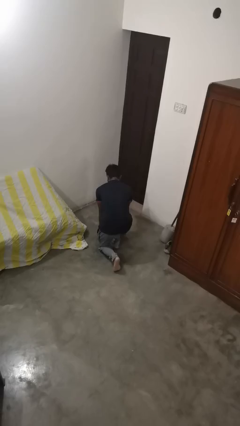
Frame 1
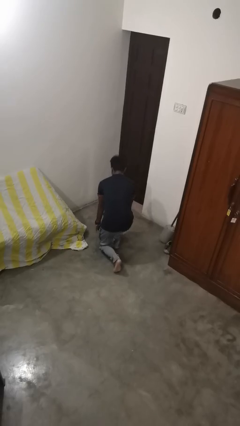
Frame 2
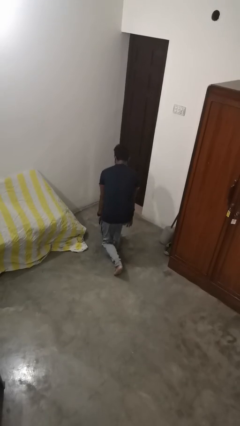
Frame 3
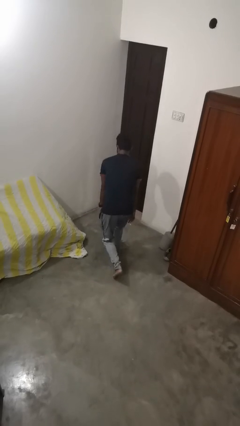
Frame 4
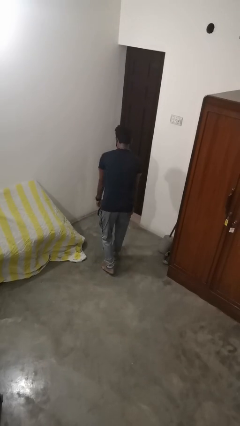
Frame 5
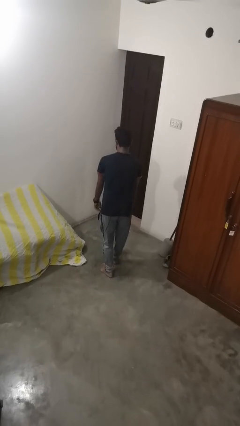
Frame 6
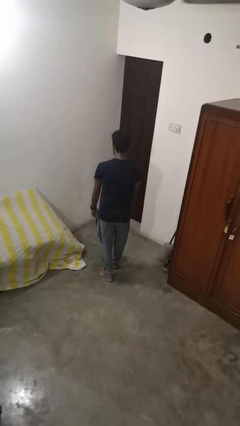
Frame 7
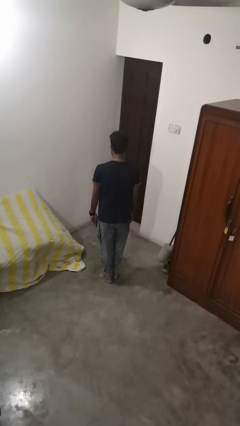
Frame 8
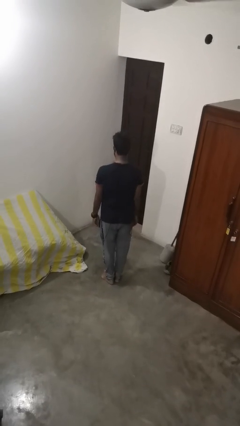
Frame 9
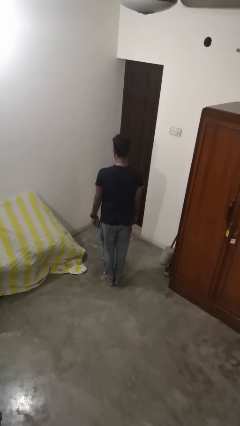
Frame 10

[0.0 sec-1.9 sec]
person stands up from floor

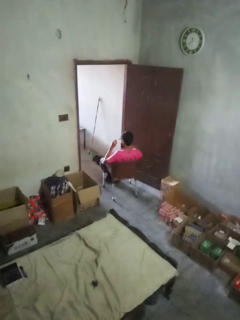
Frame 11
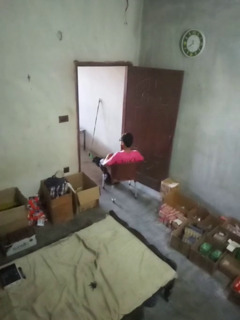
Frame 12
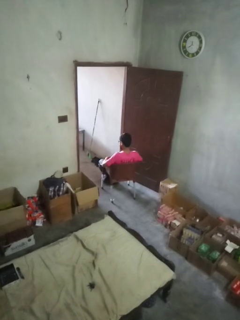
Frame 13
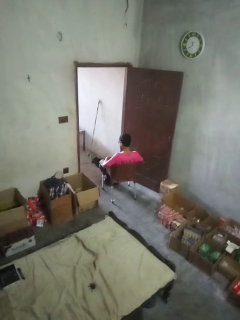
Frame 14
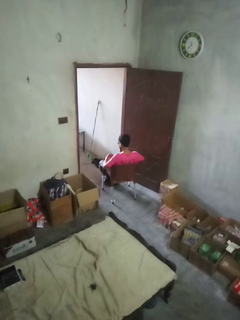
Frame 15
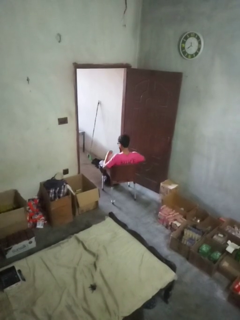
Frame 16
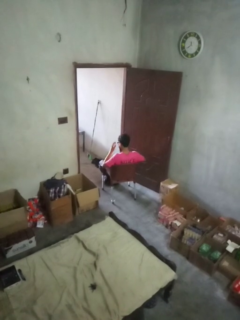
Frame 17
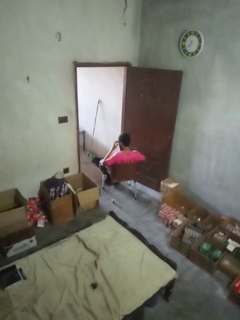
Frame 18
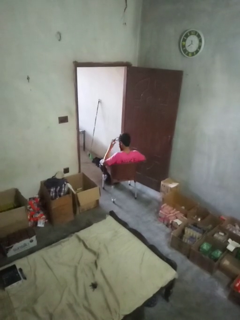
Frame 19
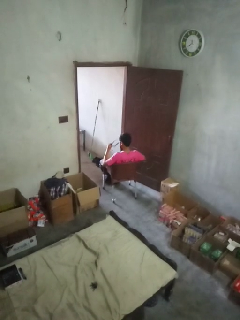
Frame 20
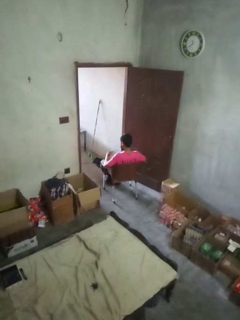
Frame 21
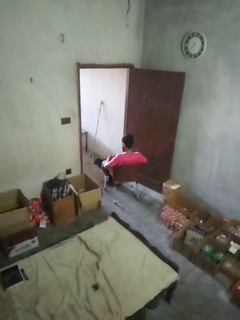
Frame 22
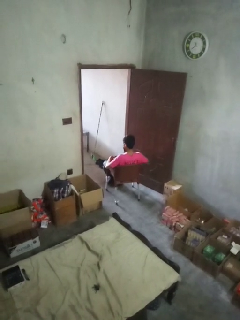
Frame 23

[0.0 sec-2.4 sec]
person takes off glasses

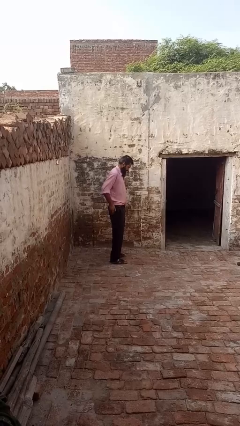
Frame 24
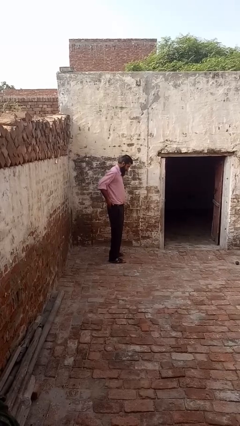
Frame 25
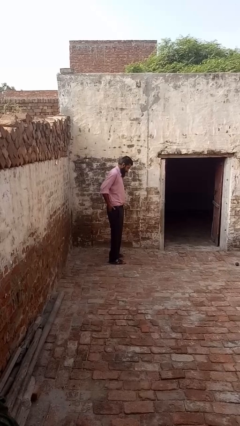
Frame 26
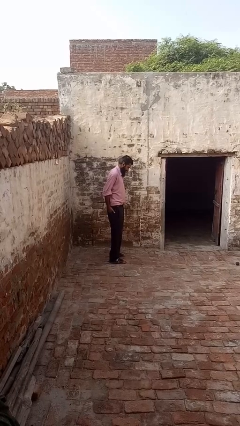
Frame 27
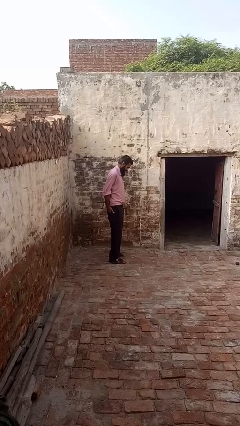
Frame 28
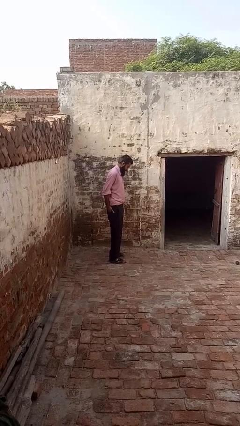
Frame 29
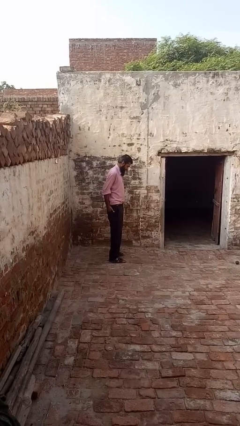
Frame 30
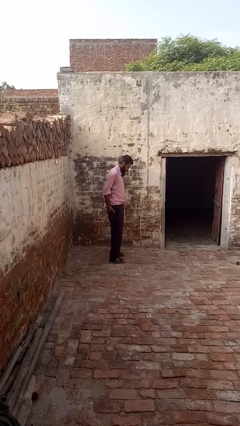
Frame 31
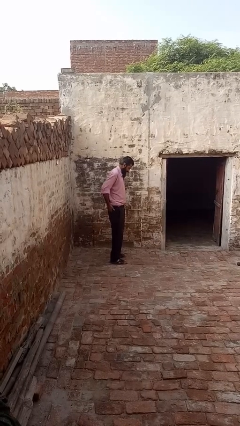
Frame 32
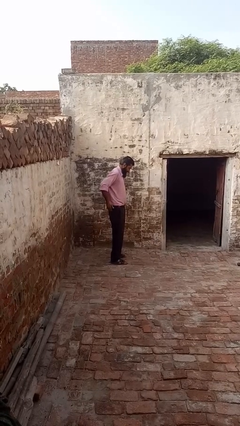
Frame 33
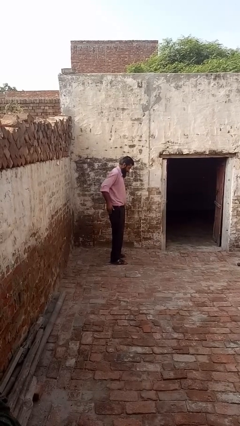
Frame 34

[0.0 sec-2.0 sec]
person puts hands in back pockets

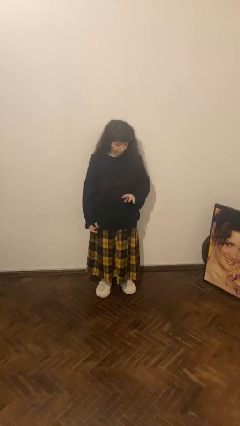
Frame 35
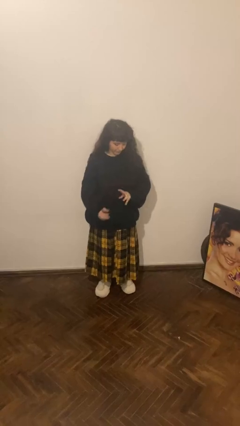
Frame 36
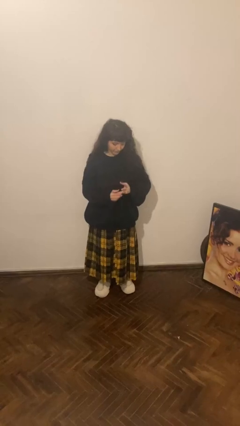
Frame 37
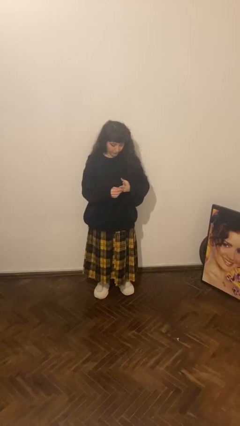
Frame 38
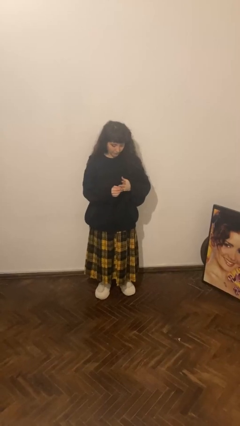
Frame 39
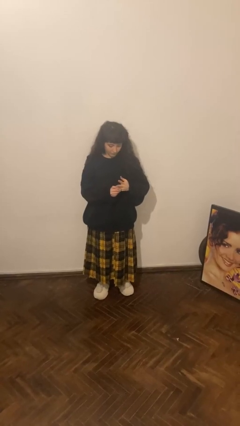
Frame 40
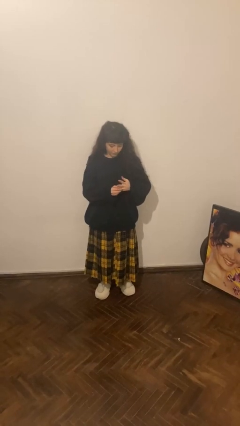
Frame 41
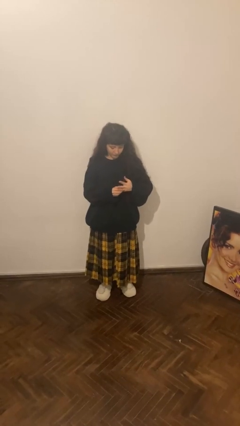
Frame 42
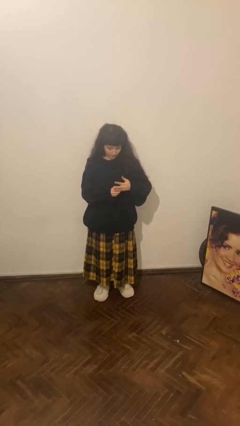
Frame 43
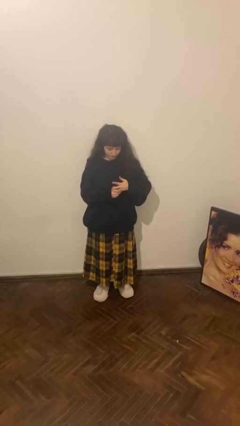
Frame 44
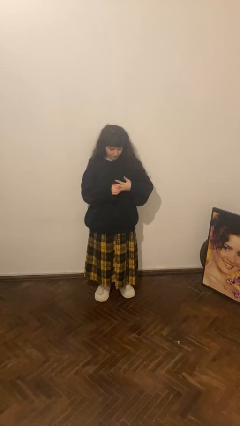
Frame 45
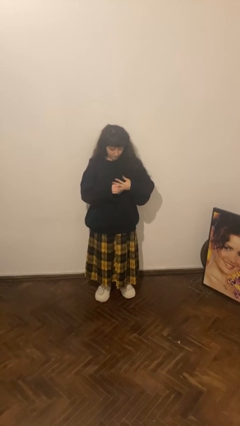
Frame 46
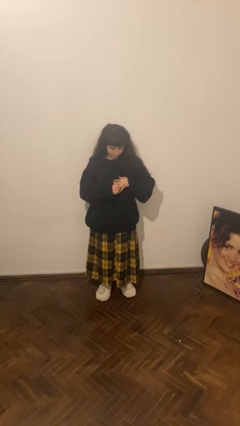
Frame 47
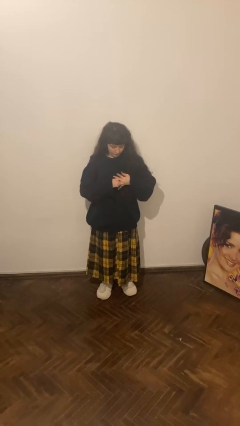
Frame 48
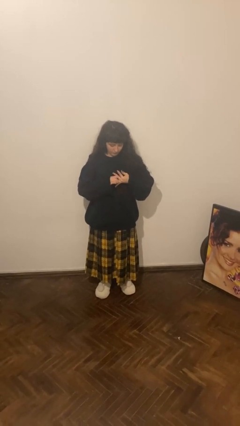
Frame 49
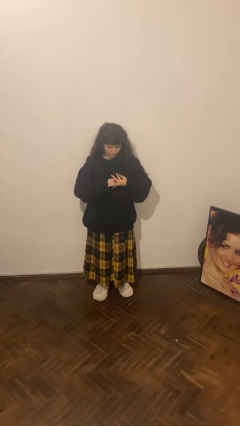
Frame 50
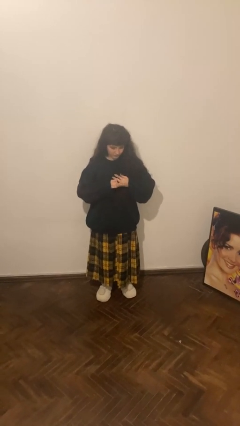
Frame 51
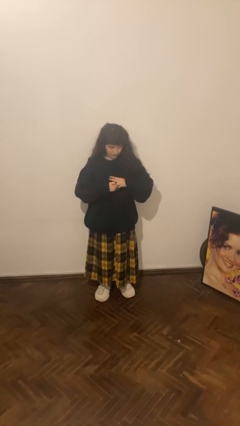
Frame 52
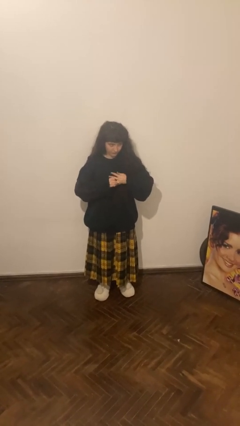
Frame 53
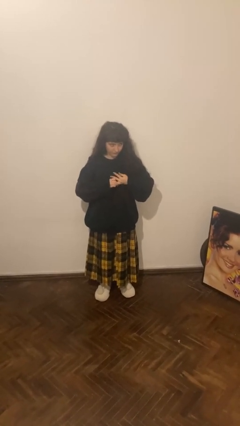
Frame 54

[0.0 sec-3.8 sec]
person takes off ring

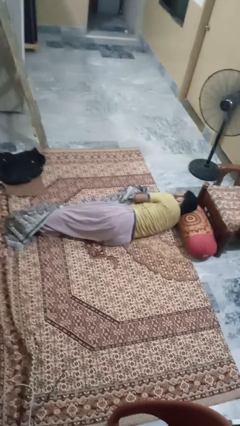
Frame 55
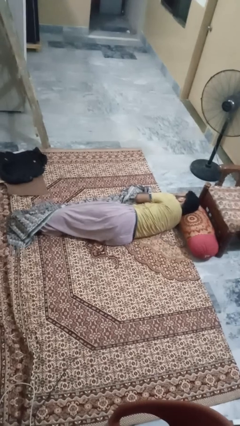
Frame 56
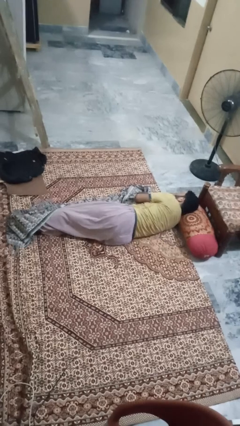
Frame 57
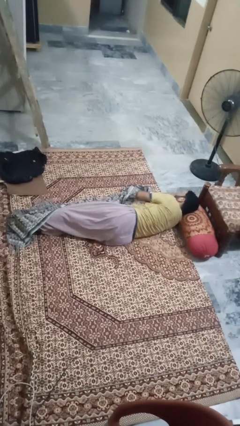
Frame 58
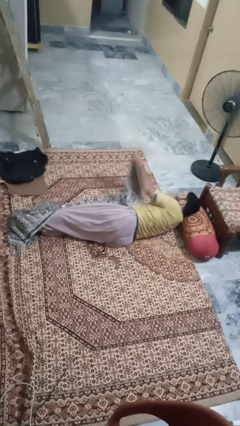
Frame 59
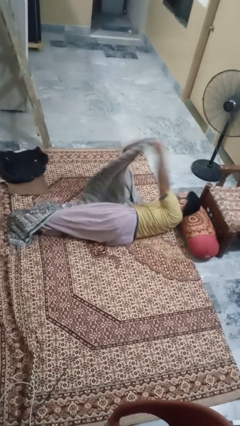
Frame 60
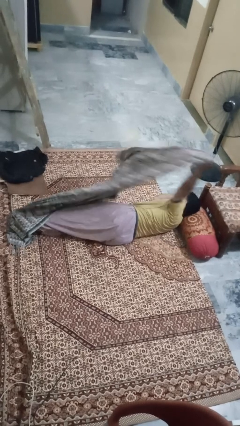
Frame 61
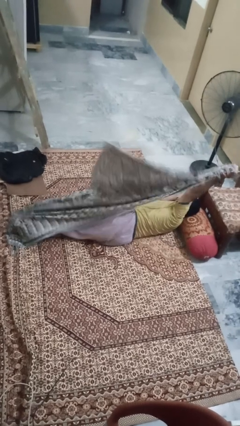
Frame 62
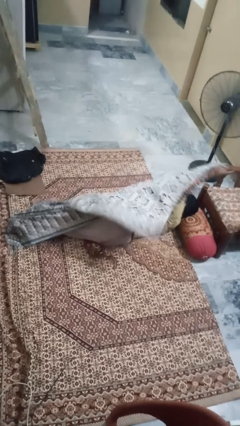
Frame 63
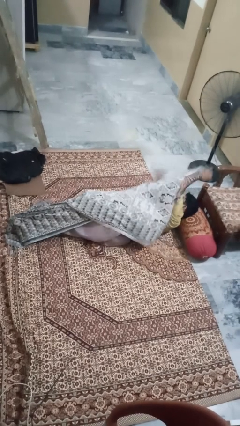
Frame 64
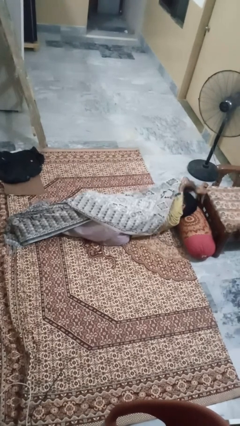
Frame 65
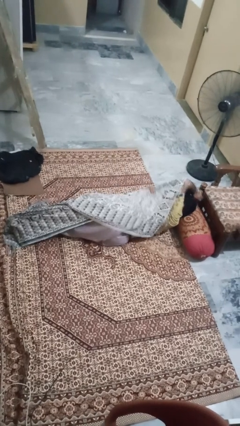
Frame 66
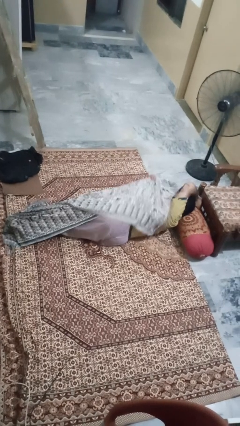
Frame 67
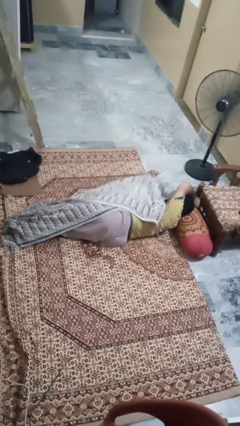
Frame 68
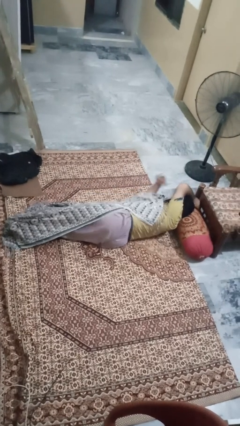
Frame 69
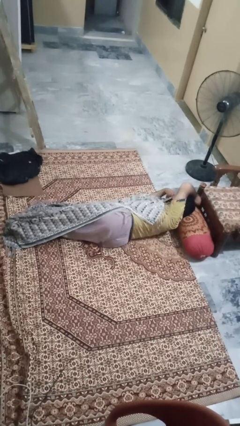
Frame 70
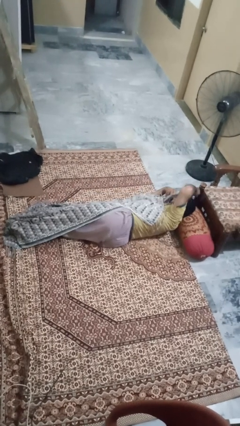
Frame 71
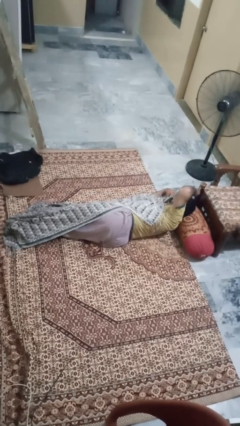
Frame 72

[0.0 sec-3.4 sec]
person covers with blanket

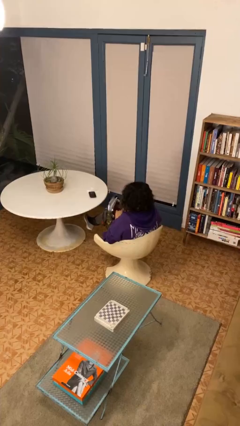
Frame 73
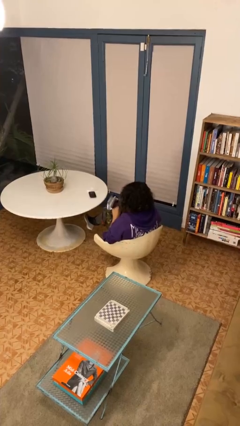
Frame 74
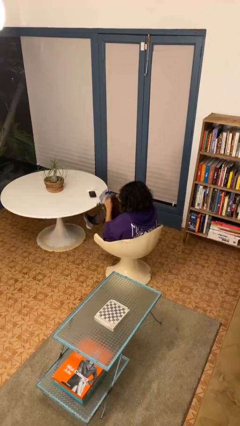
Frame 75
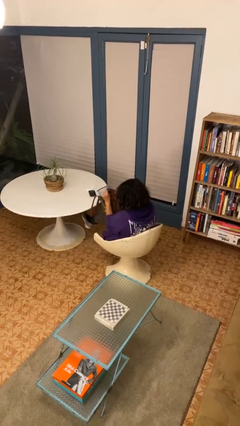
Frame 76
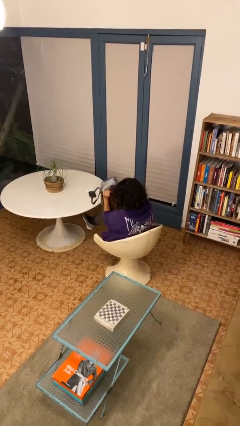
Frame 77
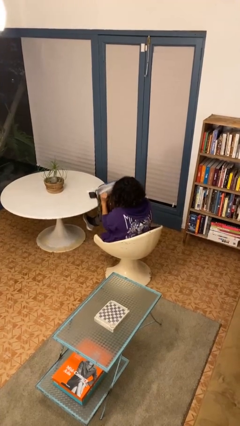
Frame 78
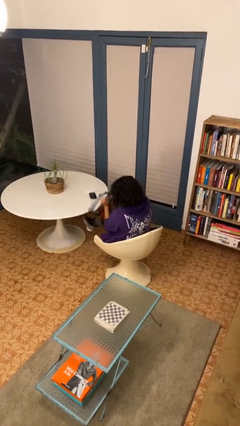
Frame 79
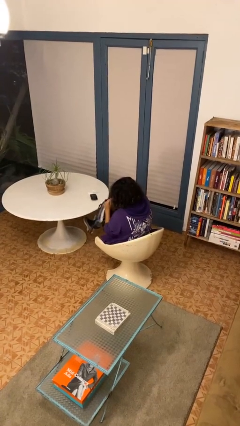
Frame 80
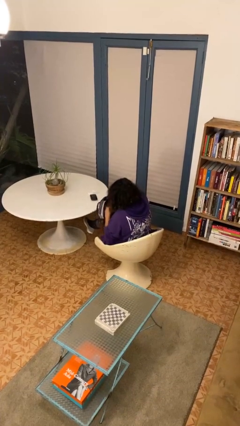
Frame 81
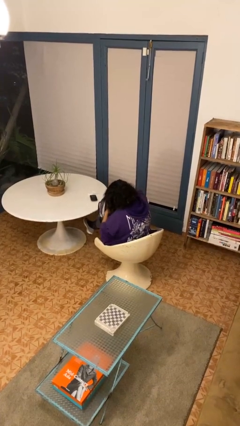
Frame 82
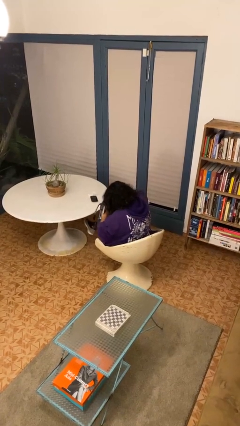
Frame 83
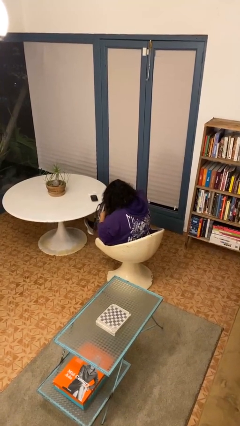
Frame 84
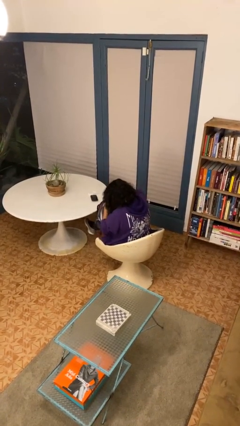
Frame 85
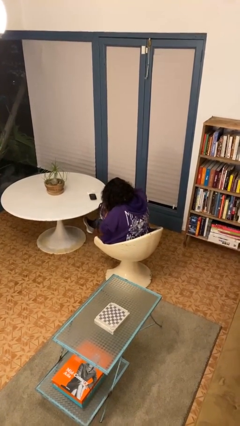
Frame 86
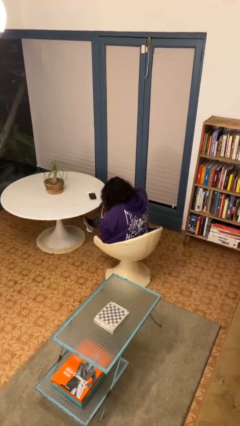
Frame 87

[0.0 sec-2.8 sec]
person searches in bag

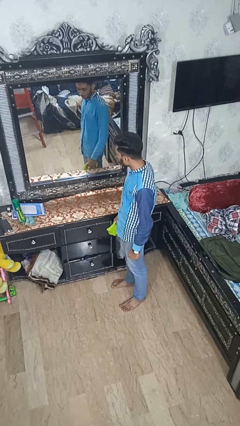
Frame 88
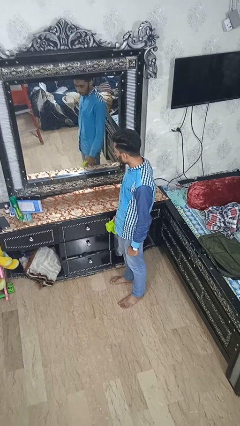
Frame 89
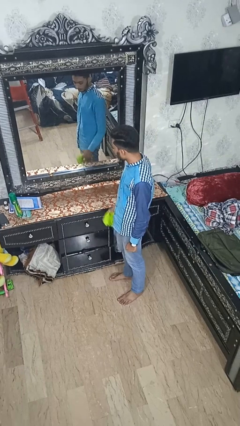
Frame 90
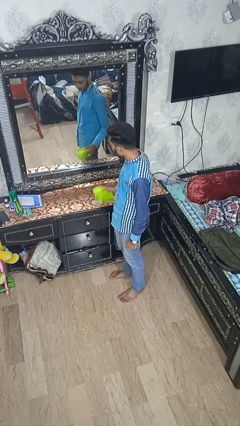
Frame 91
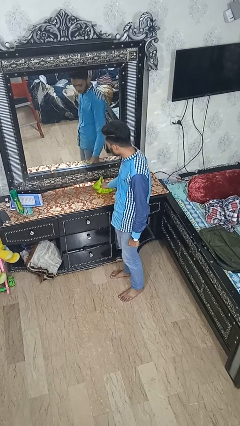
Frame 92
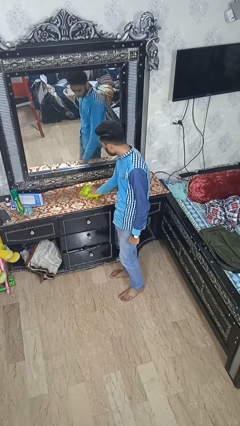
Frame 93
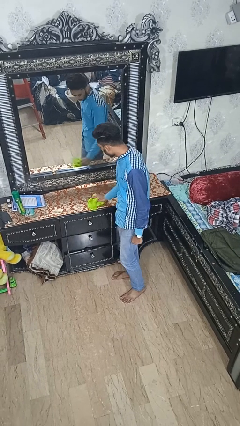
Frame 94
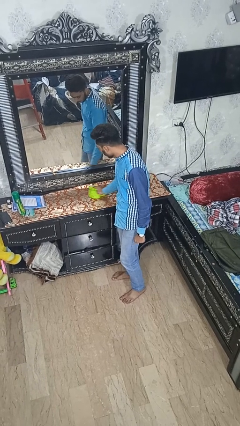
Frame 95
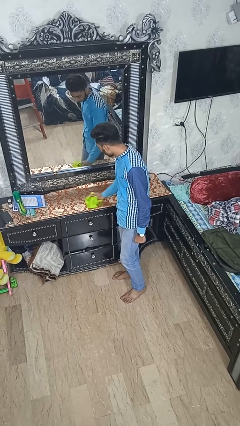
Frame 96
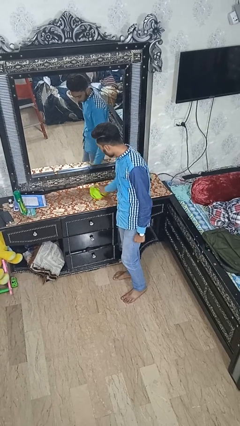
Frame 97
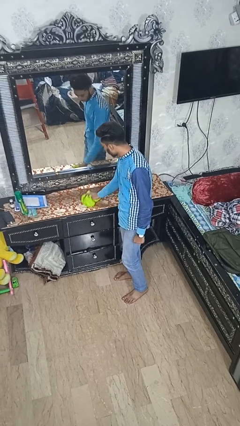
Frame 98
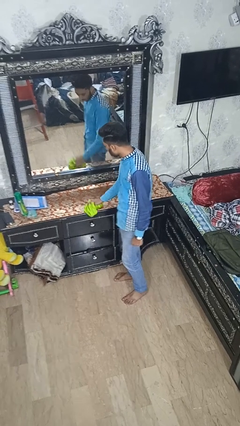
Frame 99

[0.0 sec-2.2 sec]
person cleans table with rag
